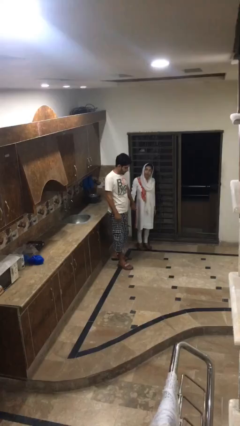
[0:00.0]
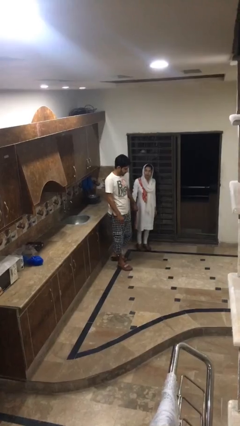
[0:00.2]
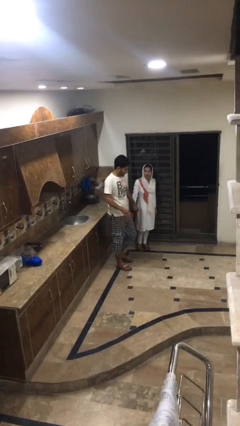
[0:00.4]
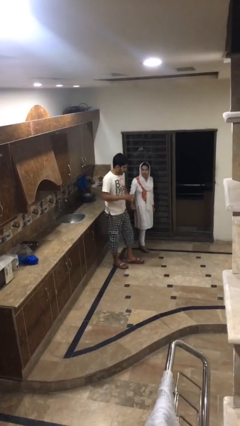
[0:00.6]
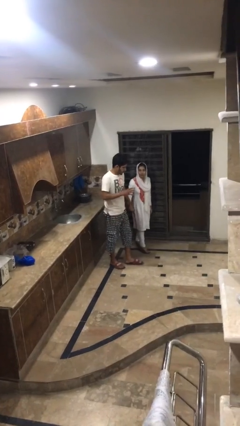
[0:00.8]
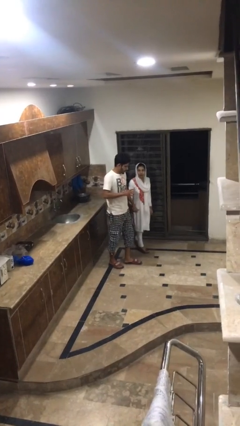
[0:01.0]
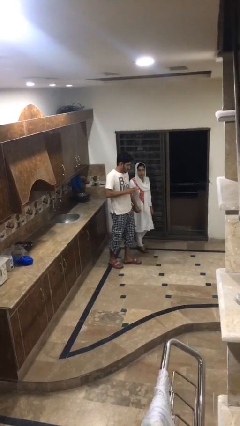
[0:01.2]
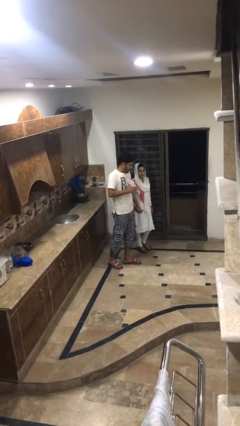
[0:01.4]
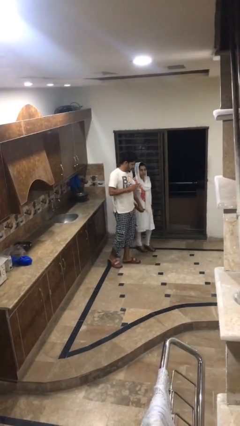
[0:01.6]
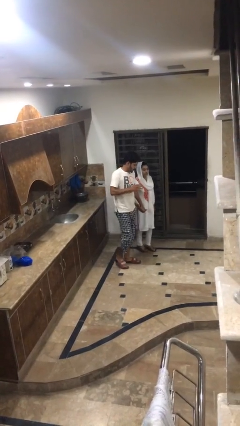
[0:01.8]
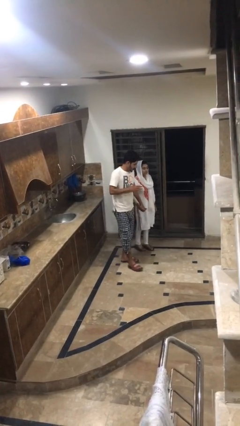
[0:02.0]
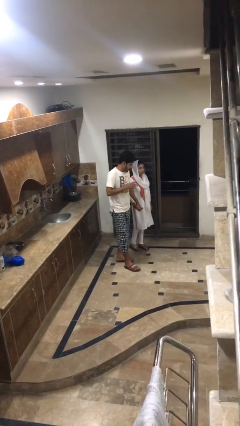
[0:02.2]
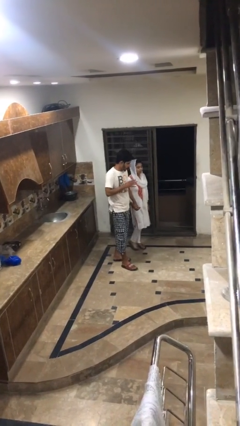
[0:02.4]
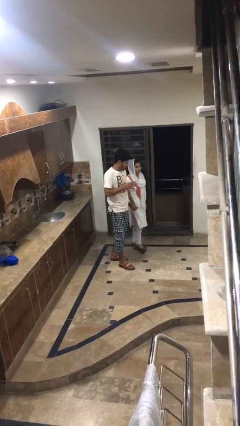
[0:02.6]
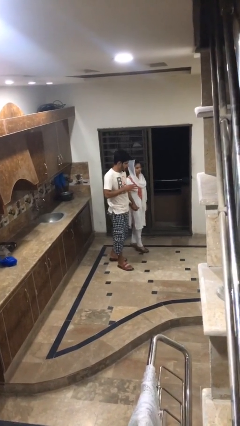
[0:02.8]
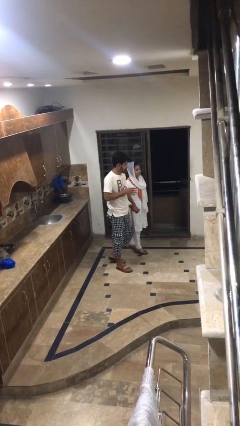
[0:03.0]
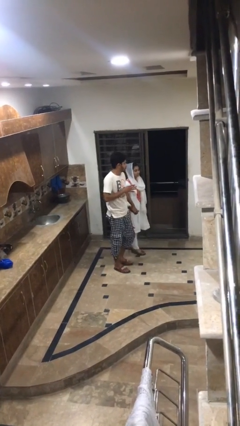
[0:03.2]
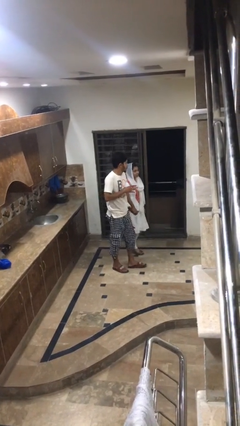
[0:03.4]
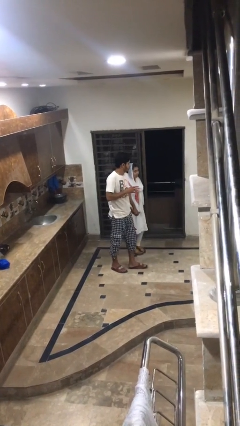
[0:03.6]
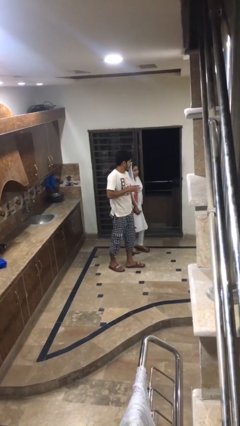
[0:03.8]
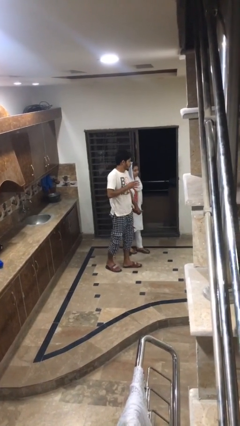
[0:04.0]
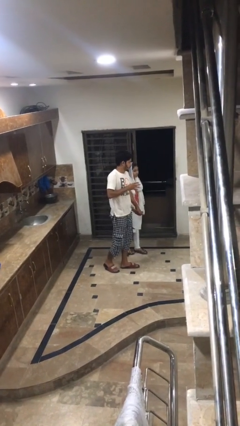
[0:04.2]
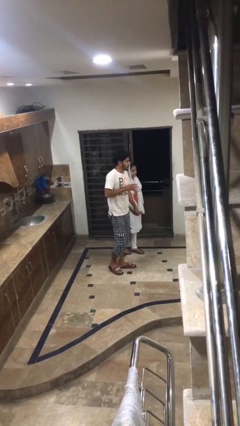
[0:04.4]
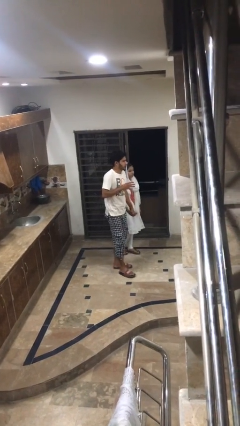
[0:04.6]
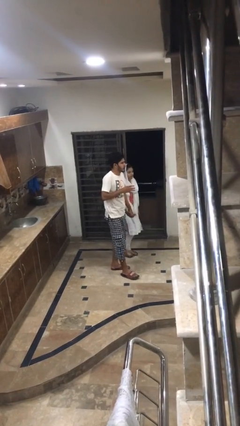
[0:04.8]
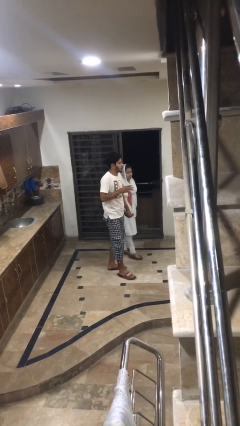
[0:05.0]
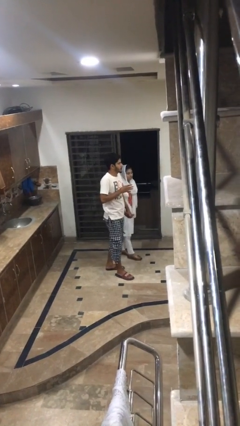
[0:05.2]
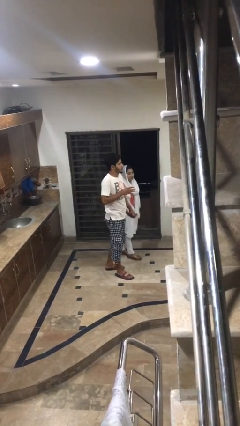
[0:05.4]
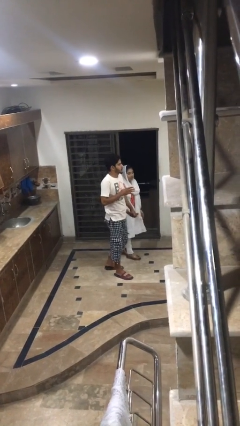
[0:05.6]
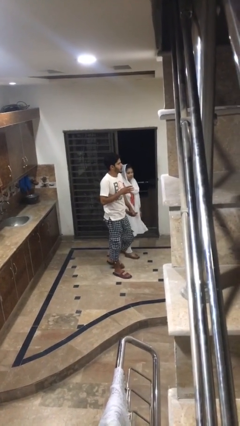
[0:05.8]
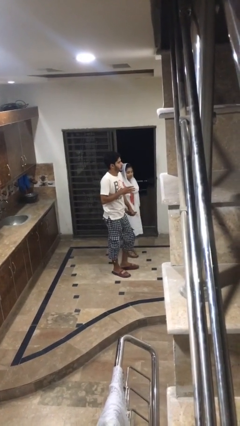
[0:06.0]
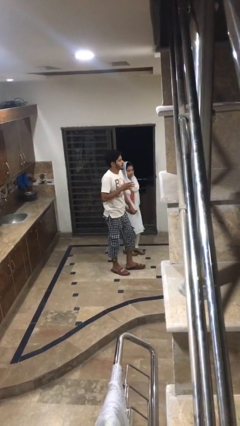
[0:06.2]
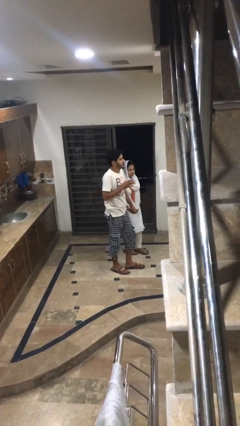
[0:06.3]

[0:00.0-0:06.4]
person holds hand

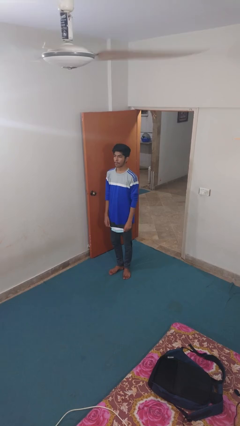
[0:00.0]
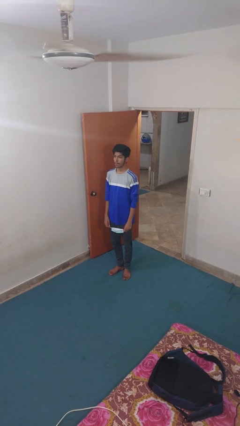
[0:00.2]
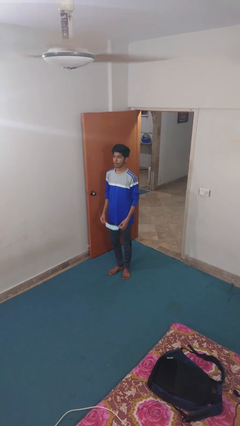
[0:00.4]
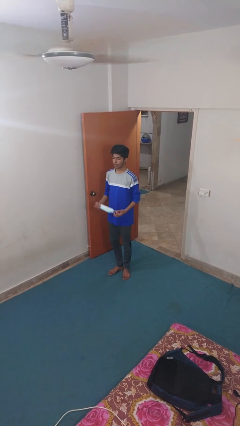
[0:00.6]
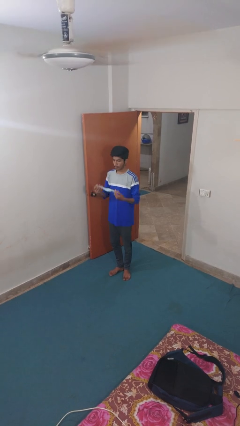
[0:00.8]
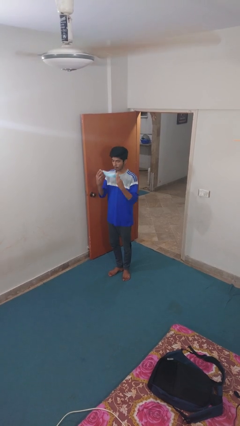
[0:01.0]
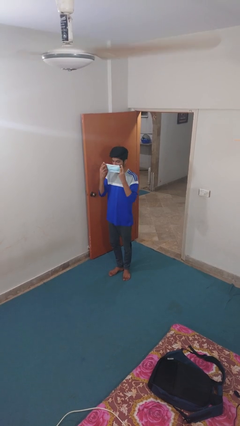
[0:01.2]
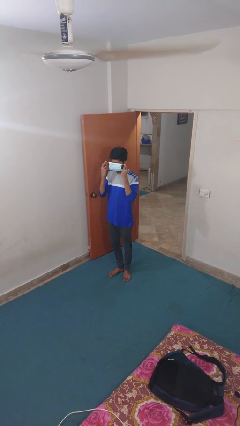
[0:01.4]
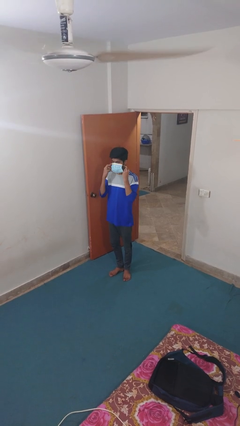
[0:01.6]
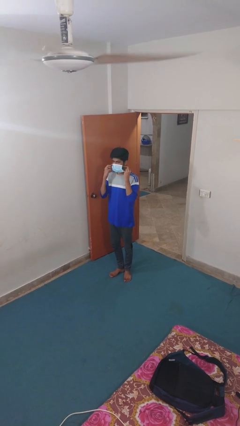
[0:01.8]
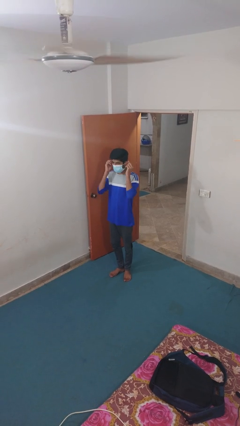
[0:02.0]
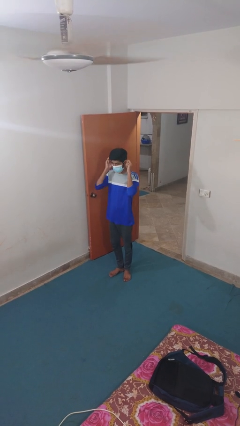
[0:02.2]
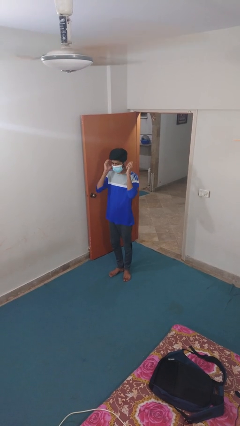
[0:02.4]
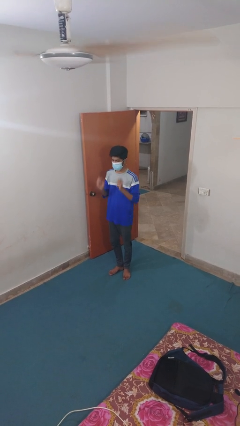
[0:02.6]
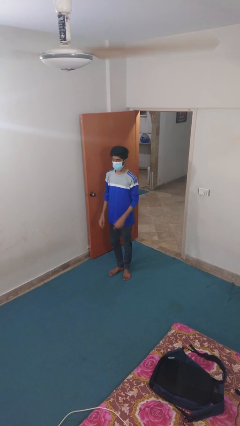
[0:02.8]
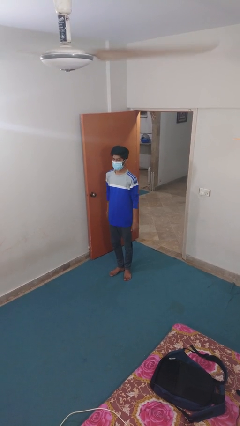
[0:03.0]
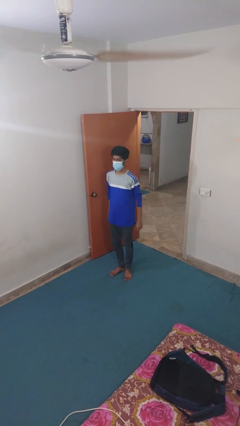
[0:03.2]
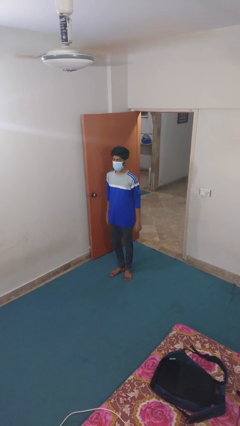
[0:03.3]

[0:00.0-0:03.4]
person puts on facemask

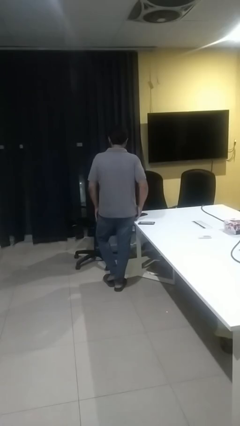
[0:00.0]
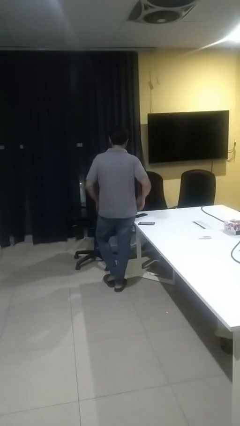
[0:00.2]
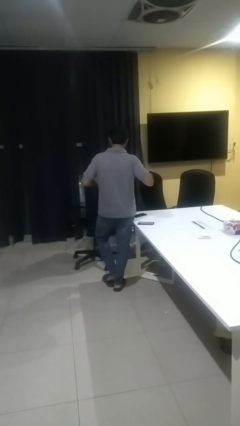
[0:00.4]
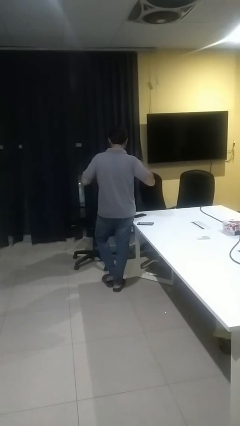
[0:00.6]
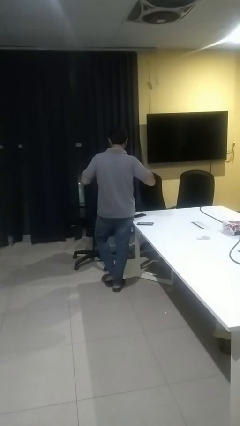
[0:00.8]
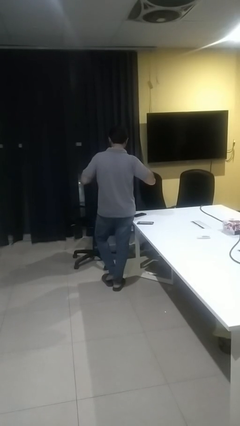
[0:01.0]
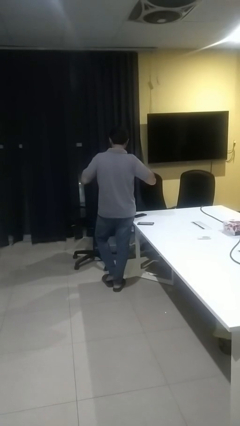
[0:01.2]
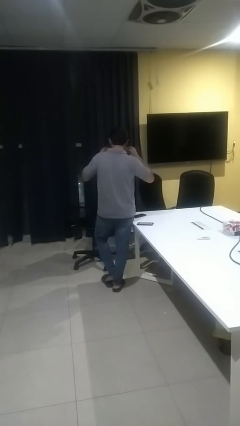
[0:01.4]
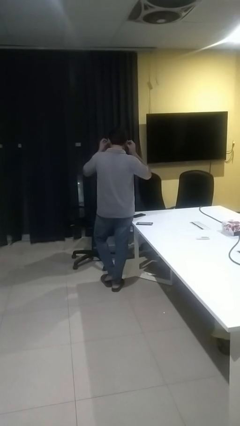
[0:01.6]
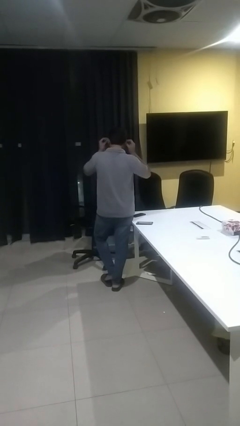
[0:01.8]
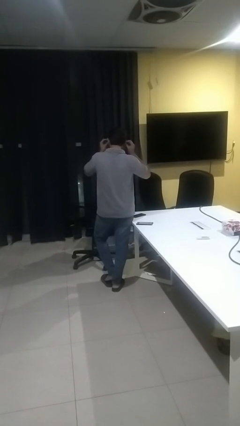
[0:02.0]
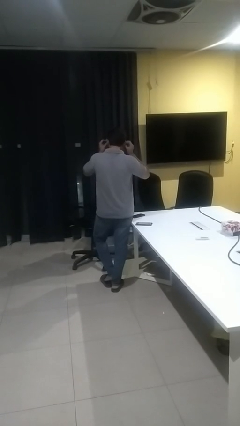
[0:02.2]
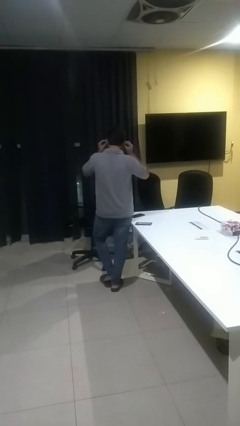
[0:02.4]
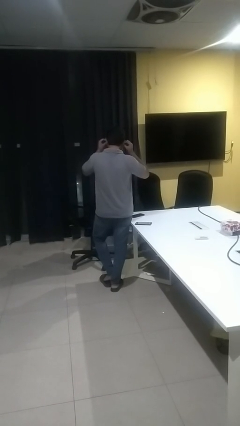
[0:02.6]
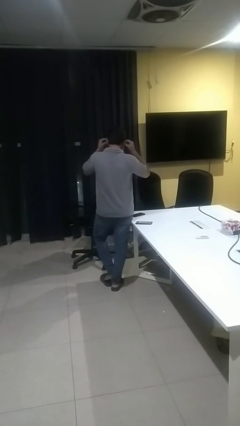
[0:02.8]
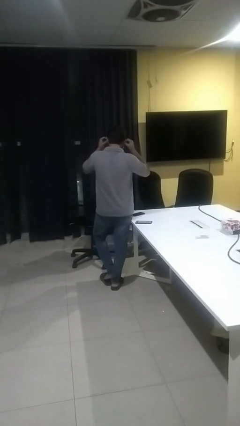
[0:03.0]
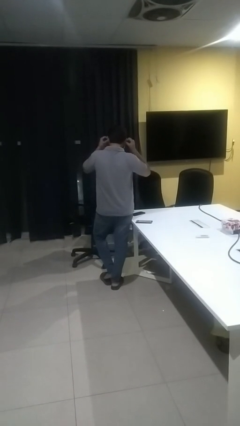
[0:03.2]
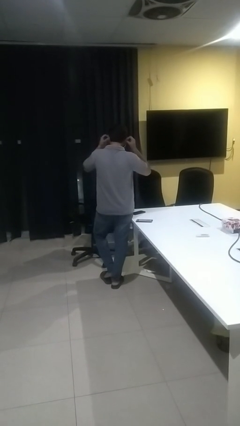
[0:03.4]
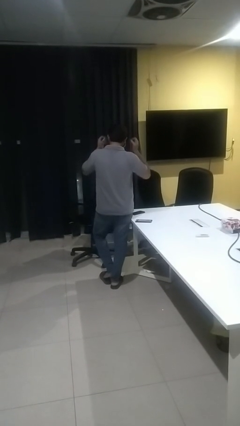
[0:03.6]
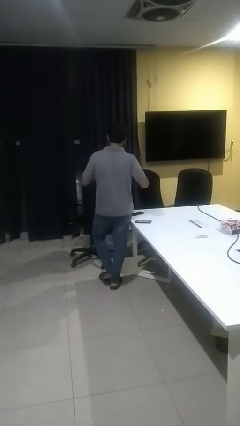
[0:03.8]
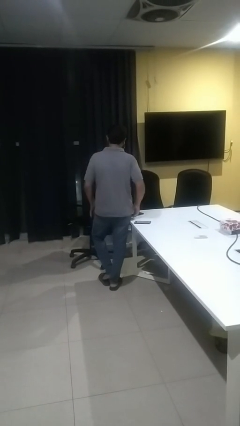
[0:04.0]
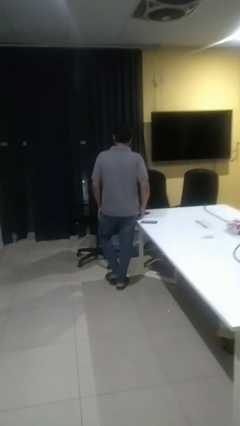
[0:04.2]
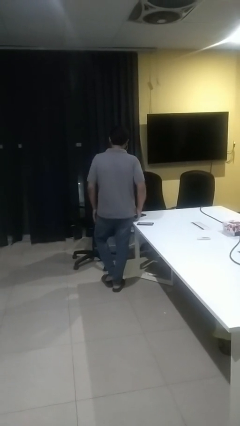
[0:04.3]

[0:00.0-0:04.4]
person puts on headphones

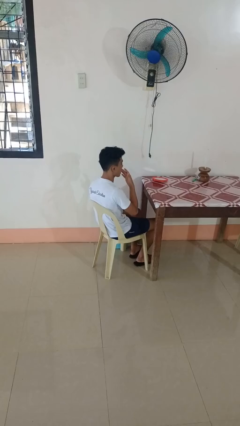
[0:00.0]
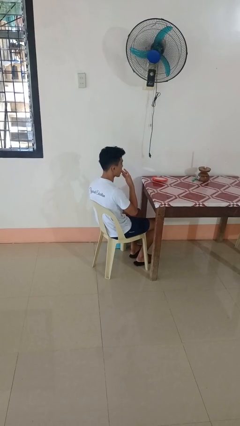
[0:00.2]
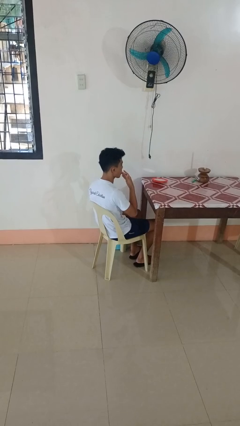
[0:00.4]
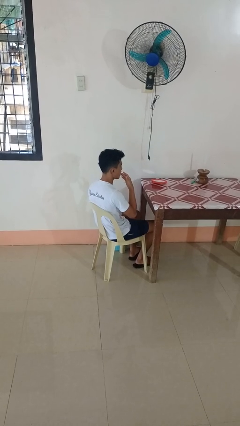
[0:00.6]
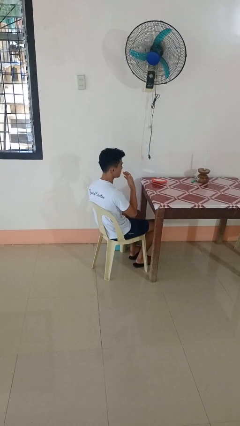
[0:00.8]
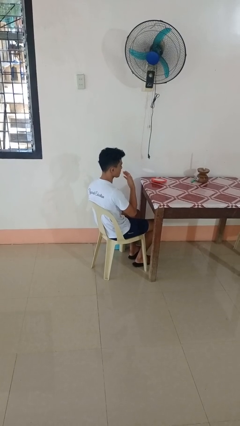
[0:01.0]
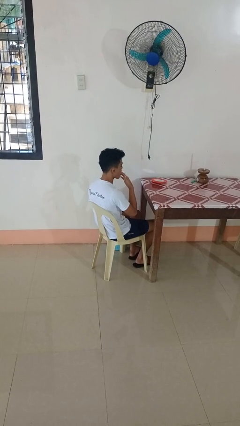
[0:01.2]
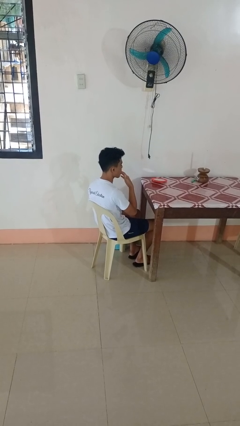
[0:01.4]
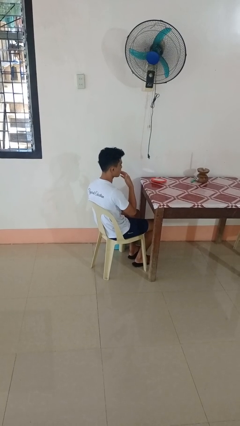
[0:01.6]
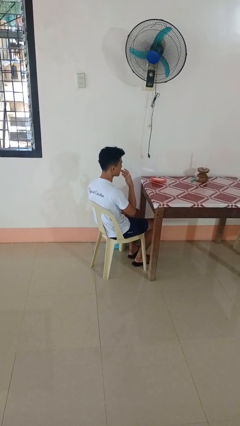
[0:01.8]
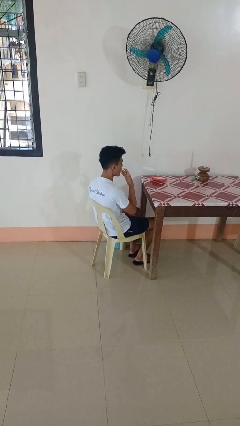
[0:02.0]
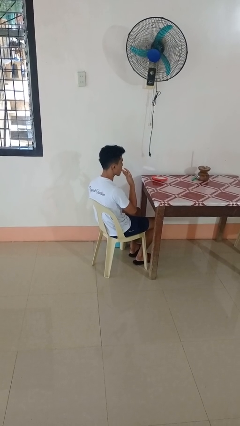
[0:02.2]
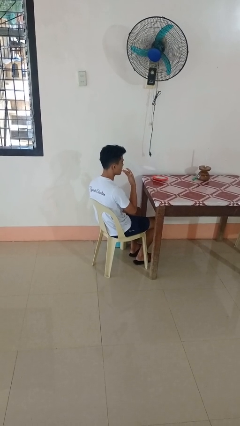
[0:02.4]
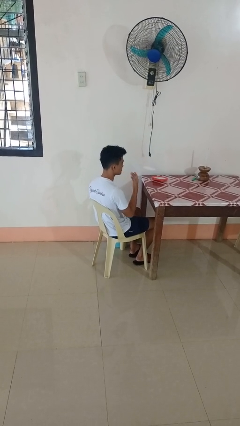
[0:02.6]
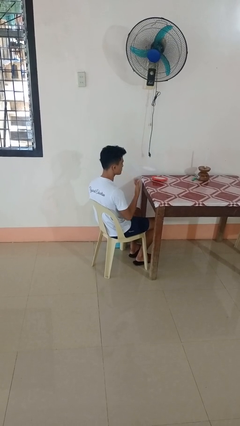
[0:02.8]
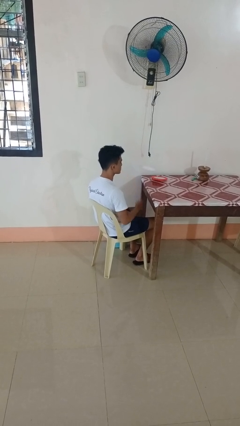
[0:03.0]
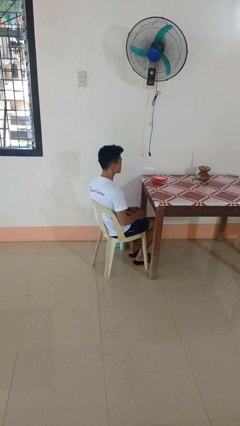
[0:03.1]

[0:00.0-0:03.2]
person licks fingers
